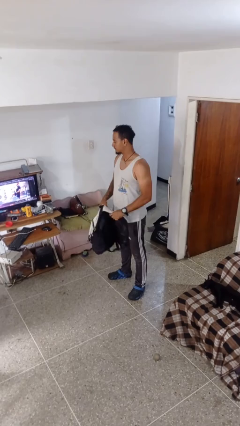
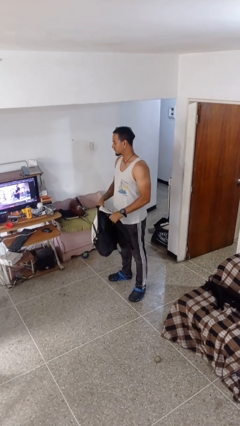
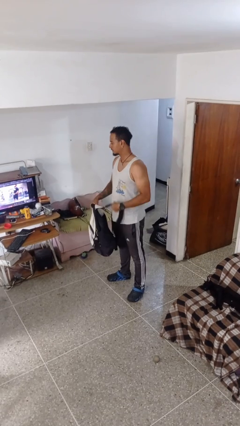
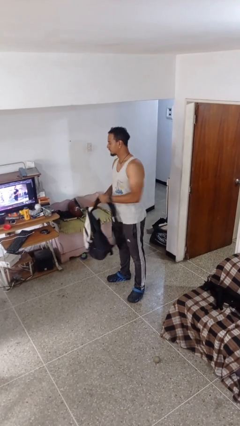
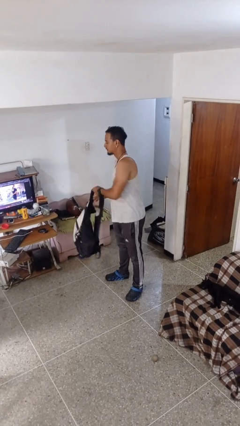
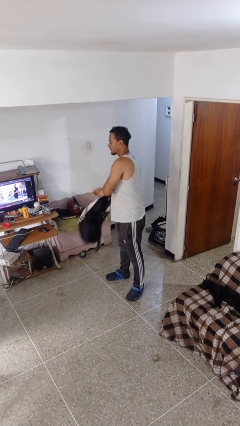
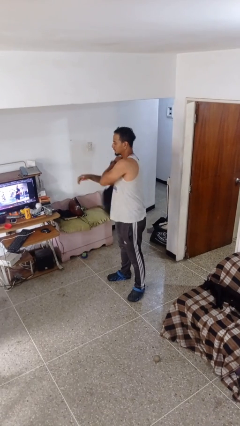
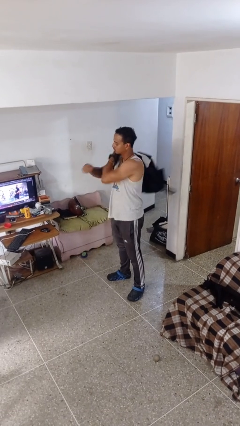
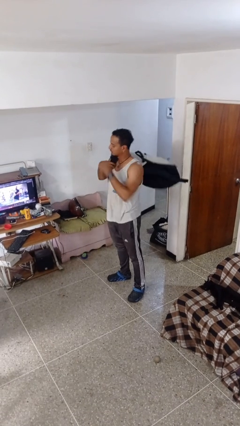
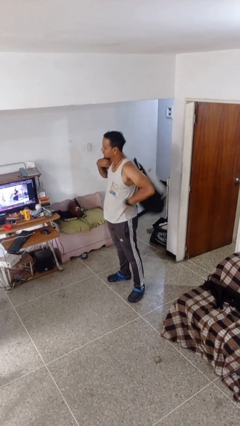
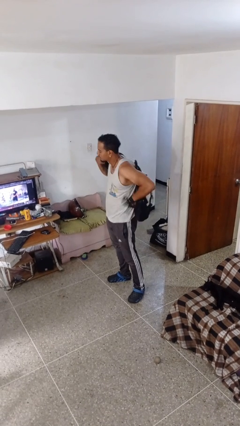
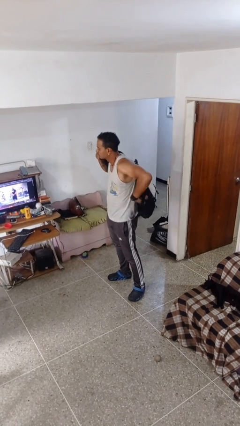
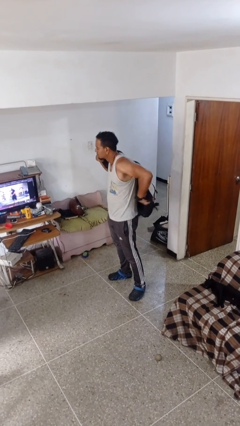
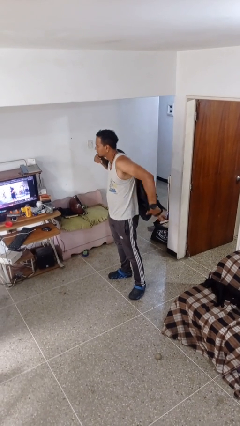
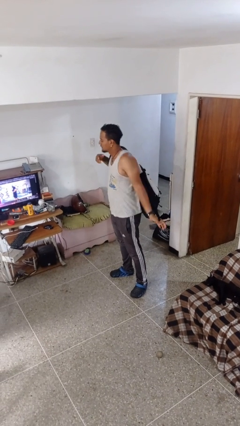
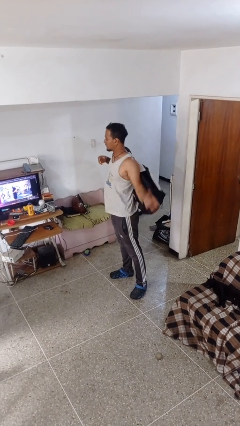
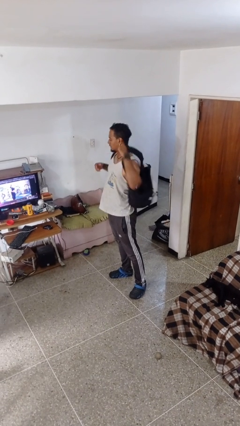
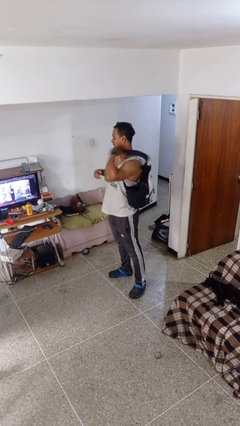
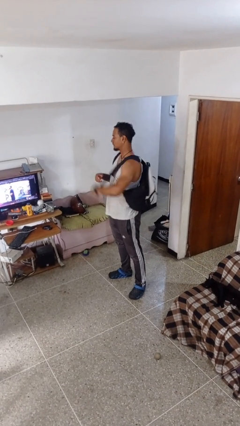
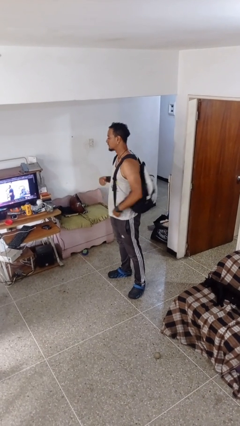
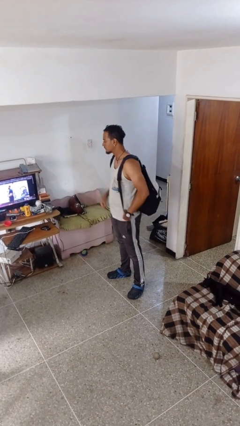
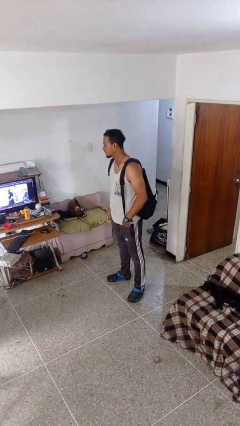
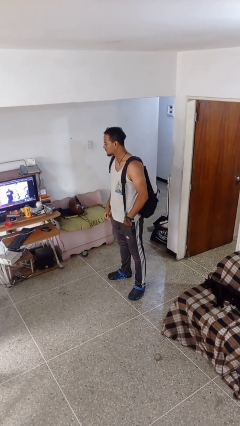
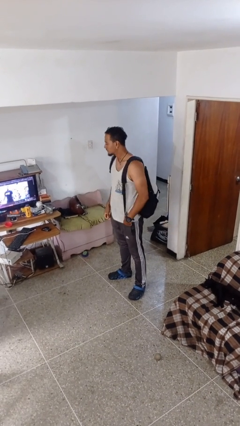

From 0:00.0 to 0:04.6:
person puts on backpack

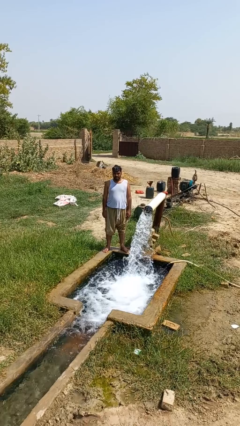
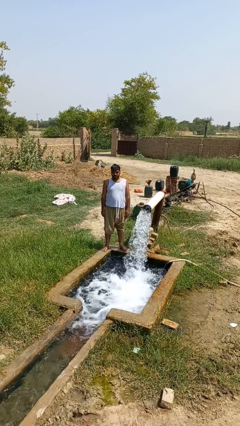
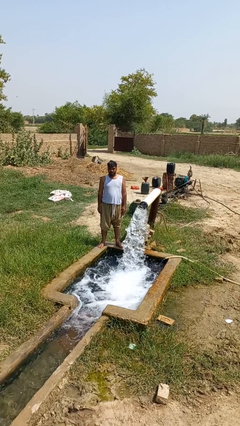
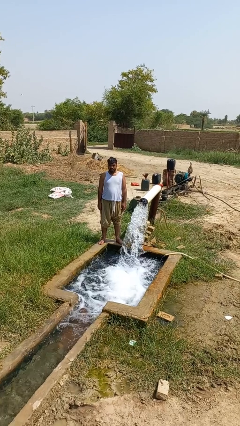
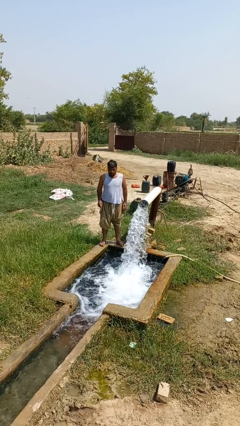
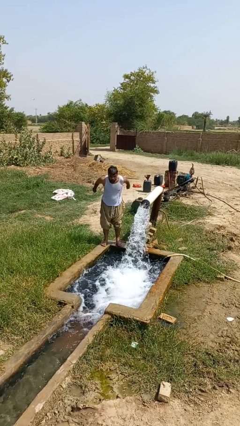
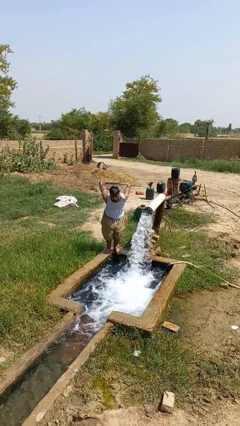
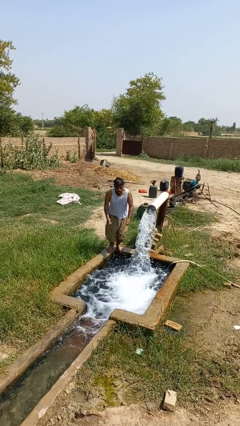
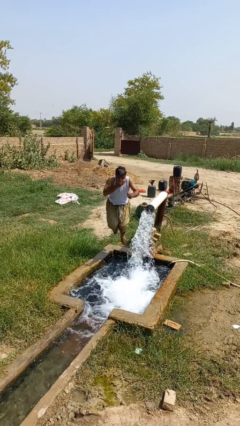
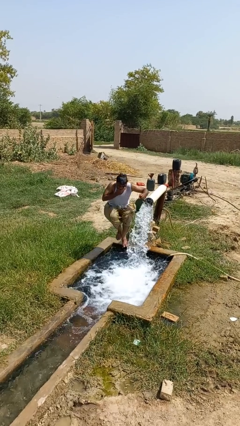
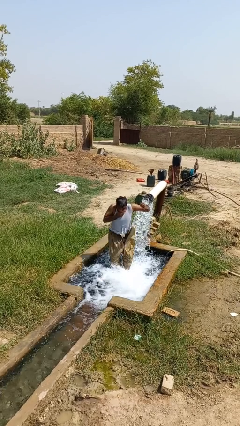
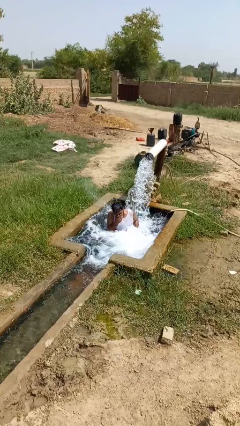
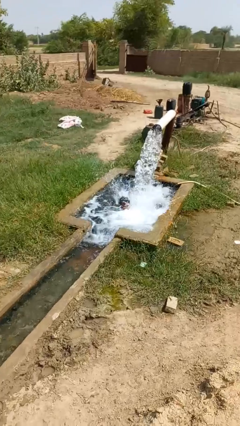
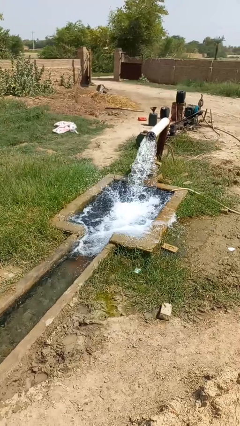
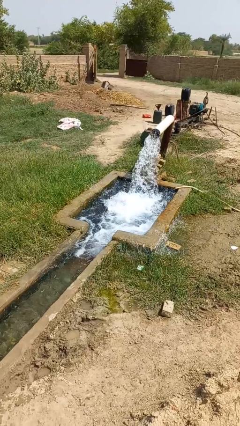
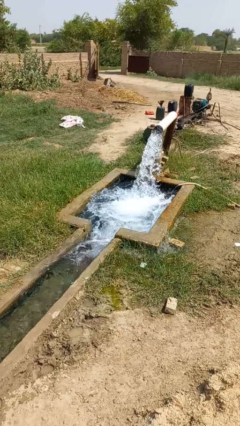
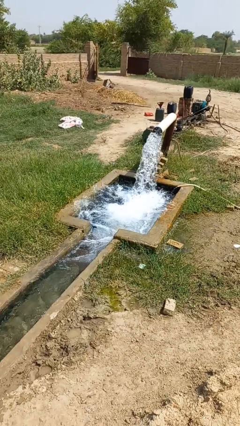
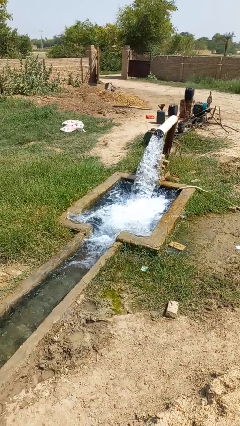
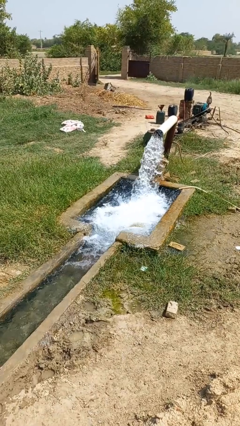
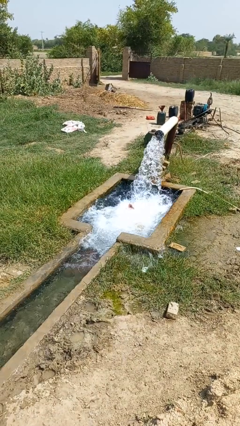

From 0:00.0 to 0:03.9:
person jumps into pool

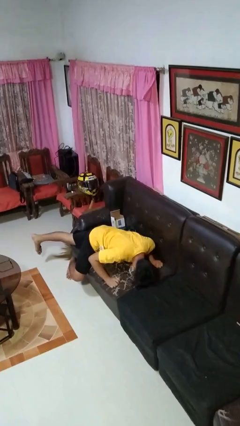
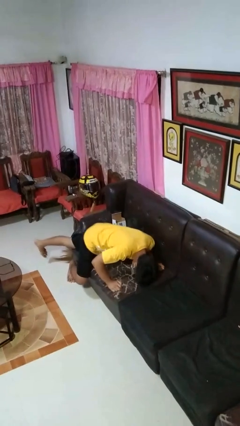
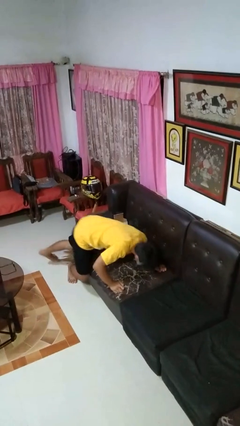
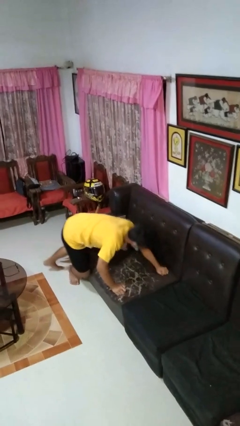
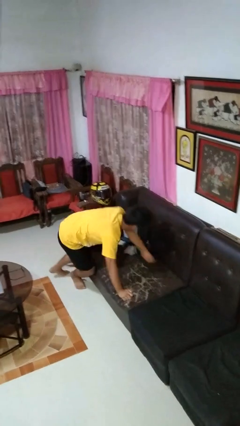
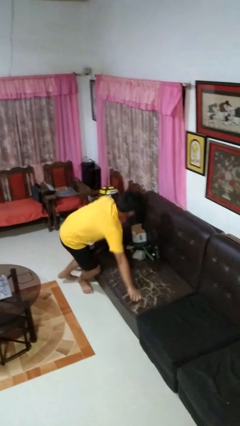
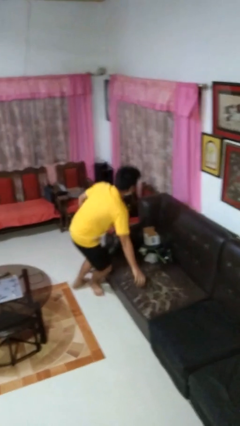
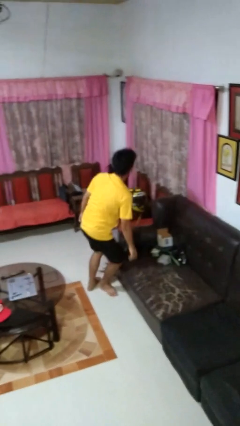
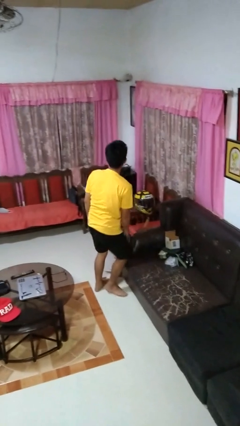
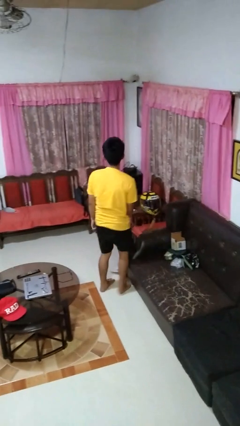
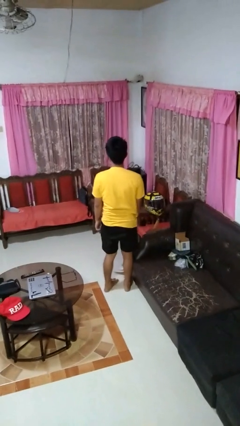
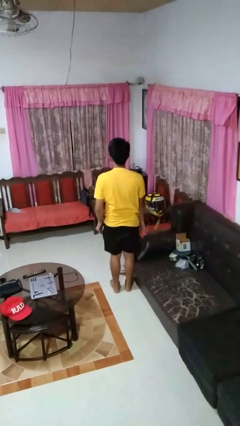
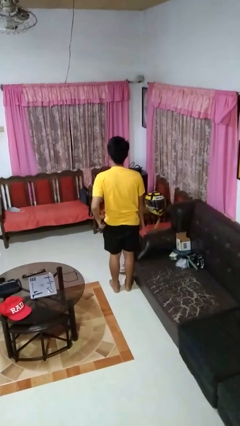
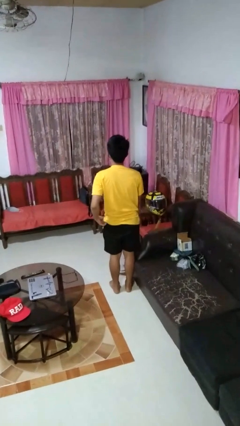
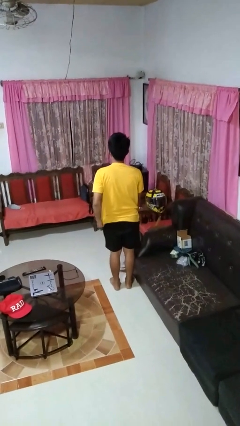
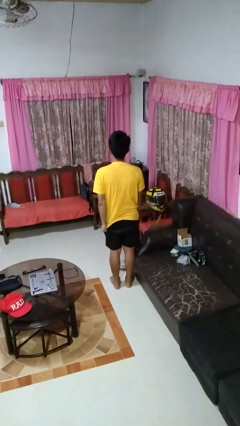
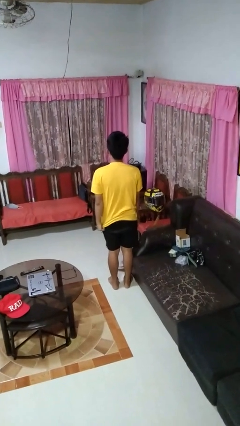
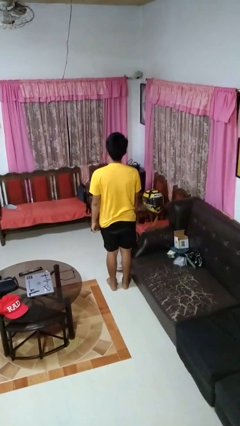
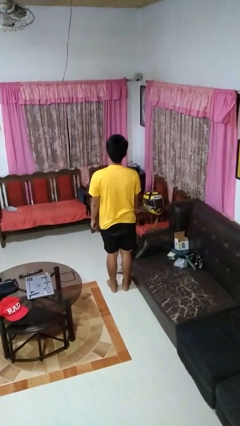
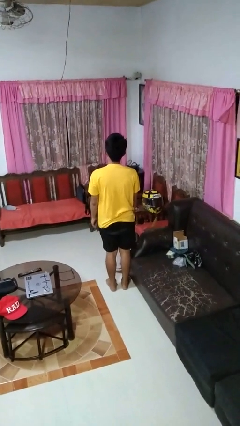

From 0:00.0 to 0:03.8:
person stands up

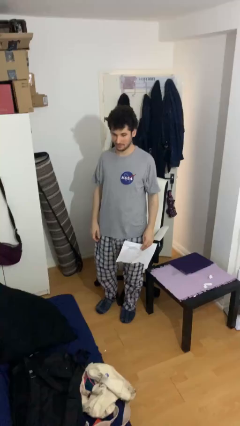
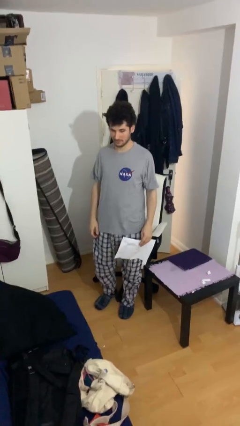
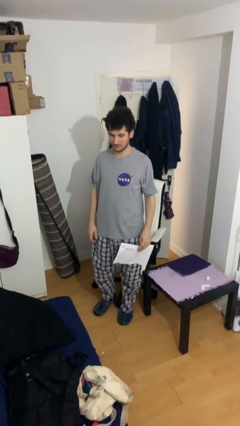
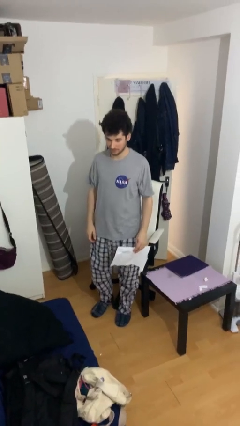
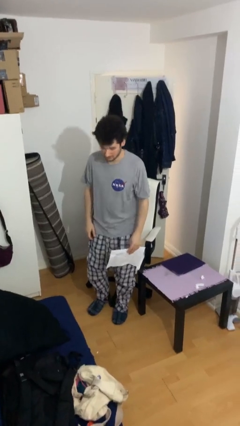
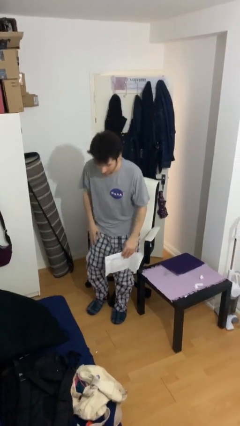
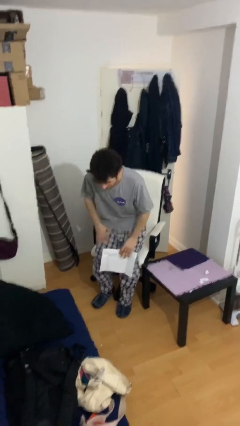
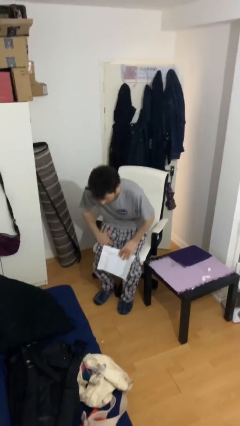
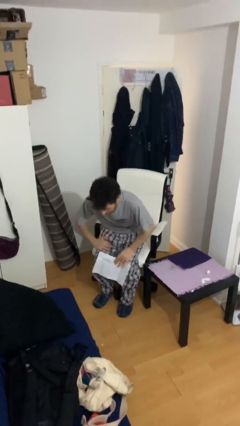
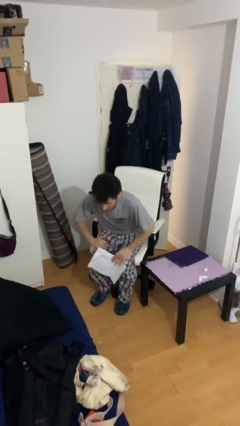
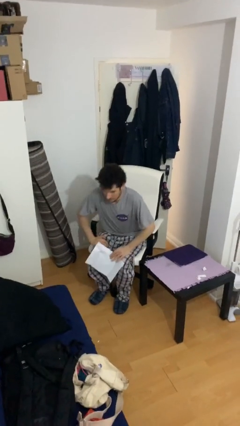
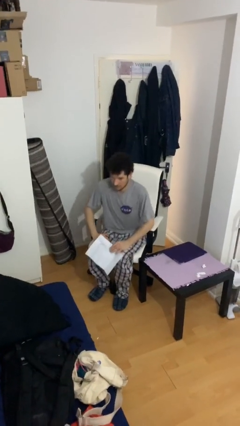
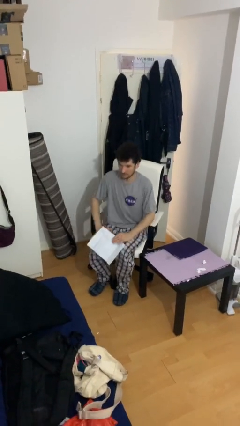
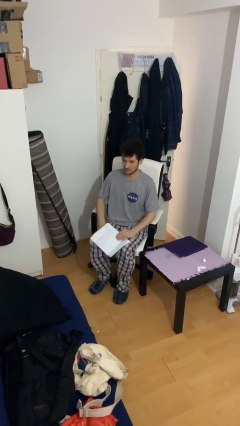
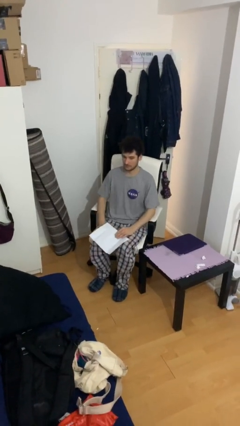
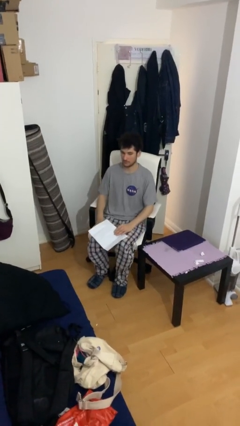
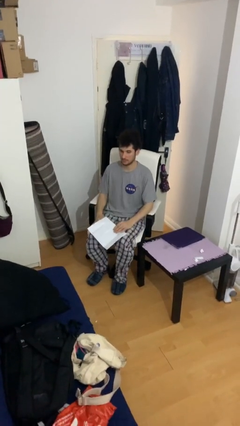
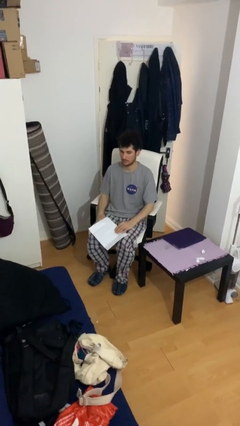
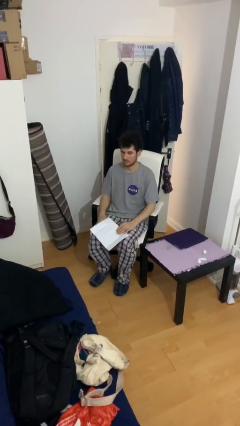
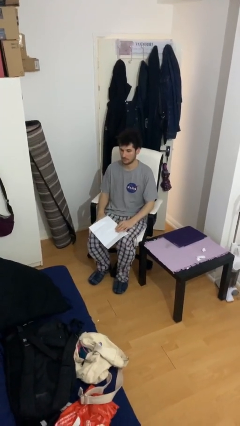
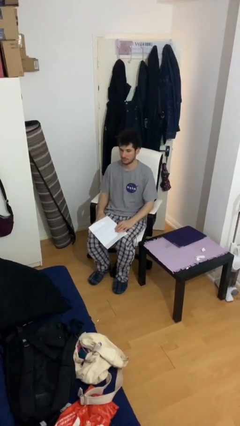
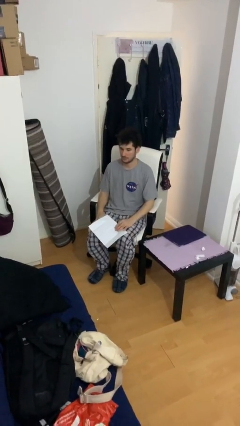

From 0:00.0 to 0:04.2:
person sits down

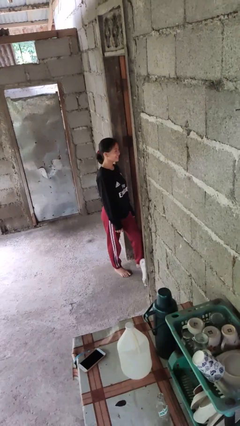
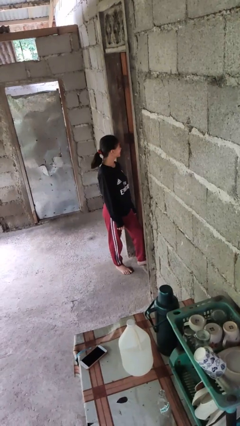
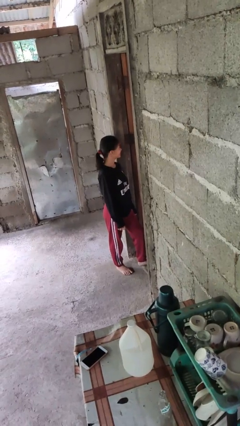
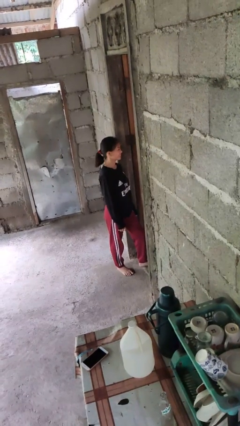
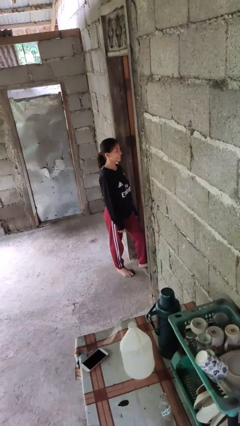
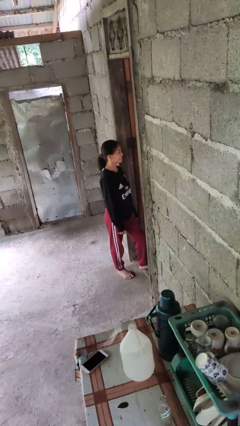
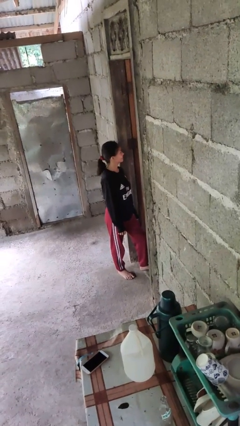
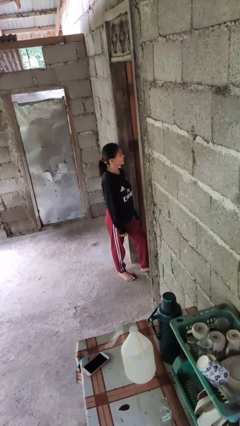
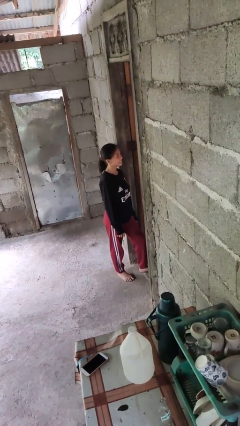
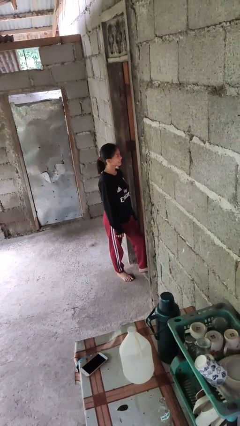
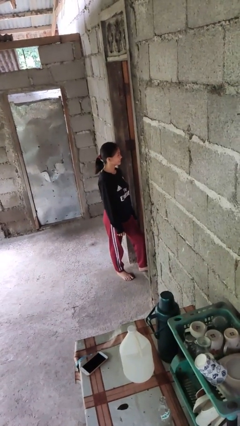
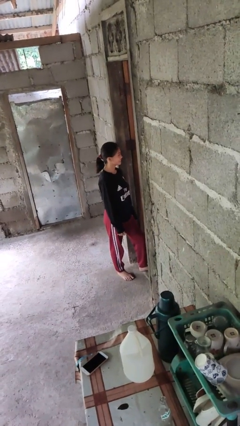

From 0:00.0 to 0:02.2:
person shakes head
